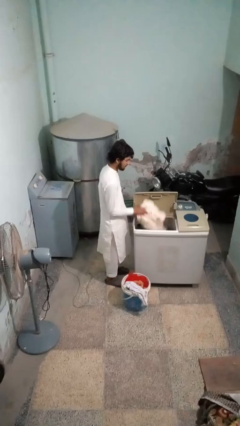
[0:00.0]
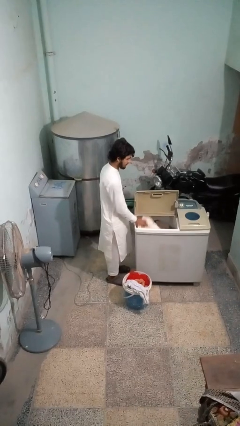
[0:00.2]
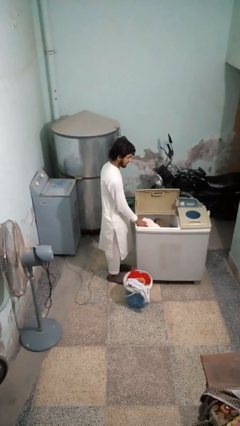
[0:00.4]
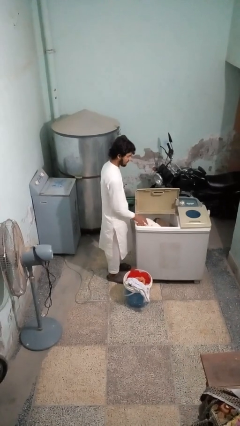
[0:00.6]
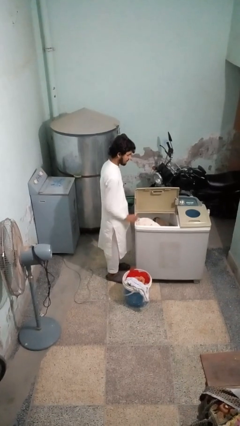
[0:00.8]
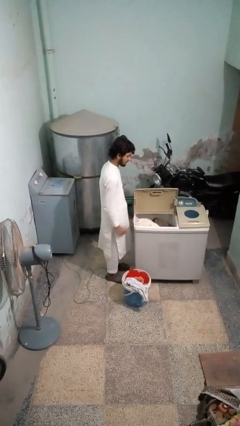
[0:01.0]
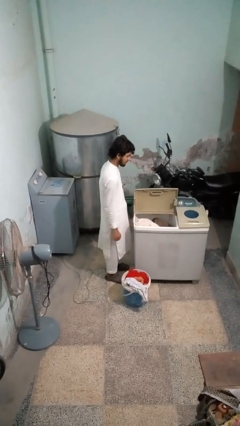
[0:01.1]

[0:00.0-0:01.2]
person loads clotheswasher

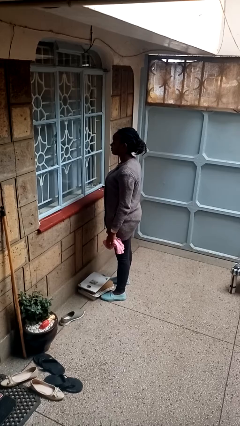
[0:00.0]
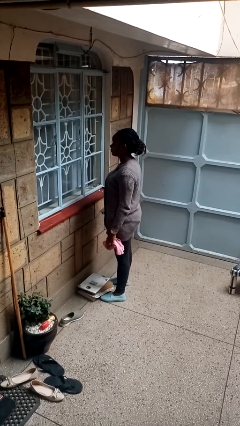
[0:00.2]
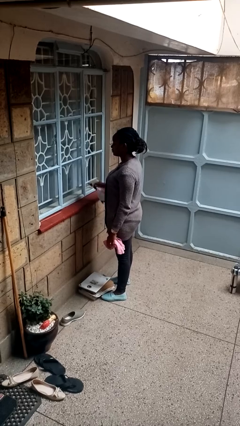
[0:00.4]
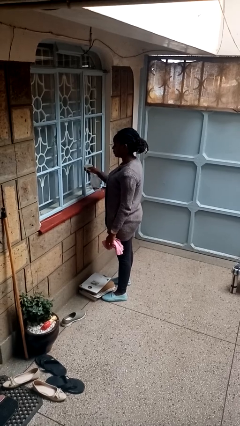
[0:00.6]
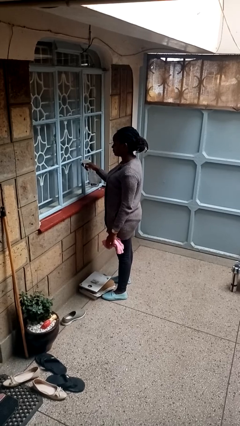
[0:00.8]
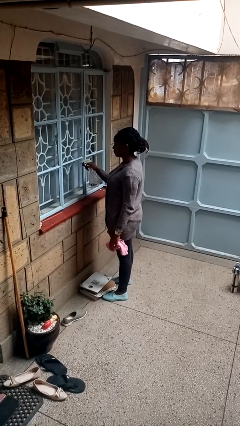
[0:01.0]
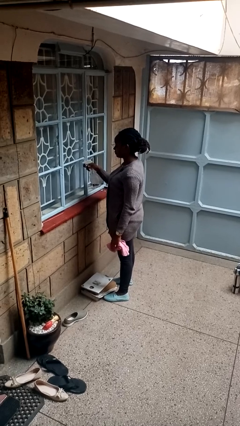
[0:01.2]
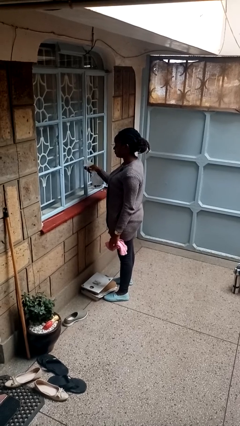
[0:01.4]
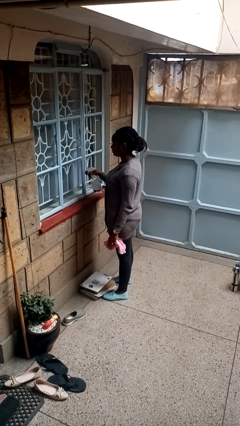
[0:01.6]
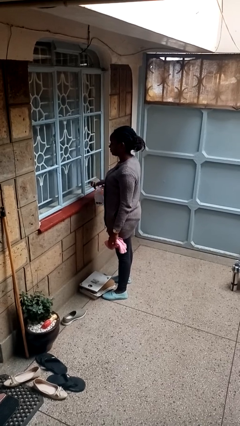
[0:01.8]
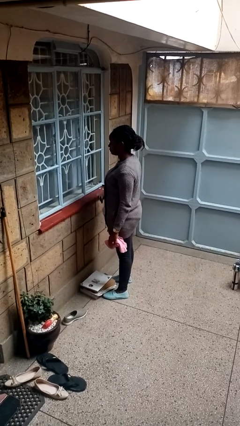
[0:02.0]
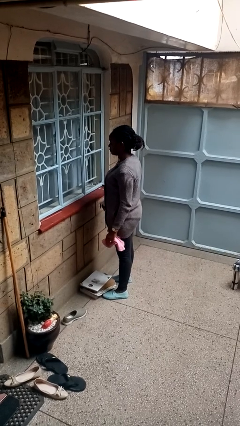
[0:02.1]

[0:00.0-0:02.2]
person sprays from bottle

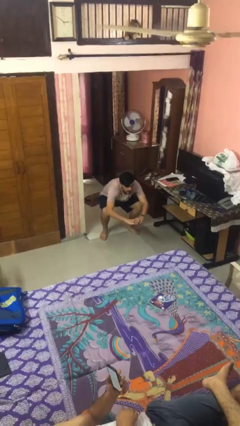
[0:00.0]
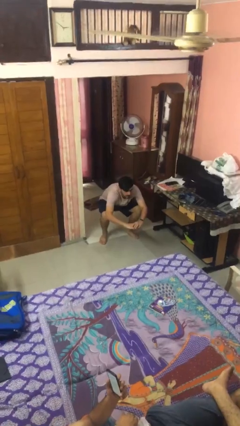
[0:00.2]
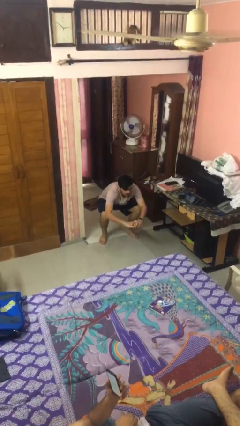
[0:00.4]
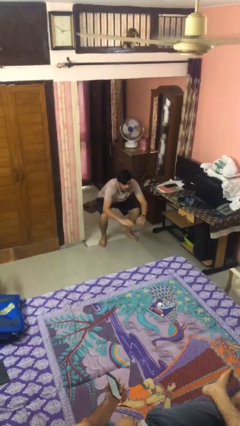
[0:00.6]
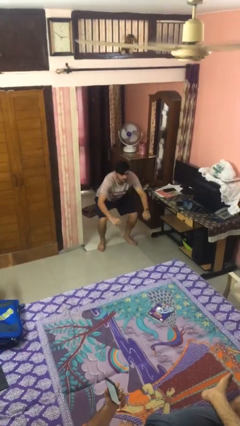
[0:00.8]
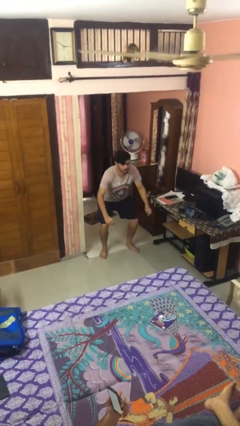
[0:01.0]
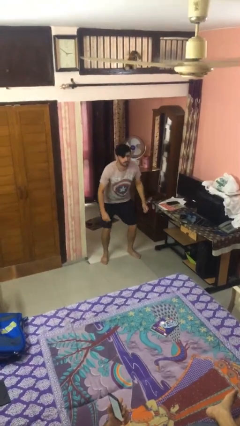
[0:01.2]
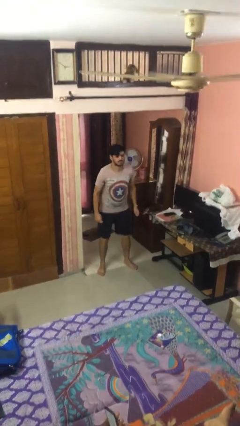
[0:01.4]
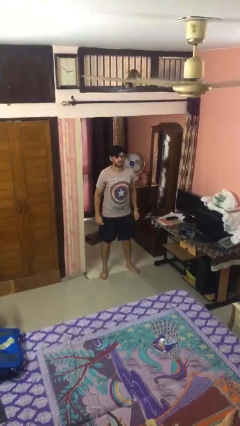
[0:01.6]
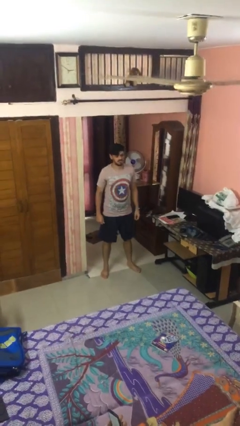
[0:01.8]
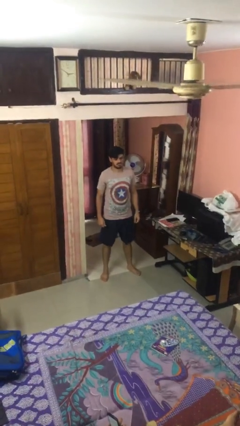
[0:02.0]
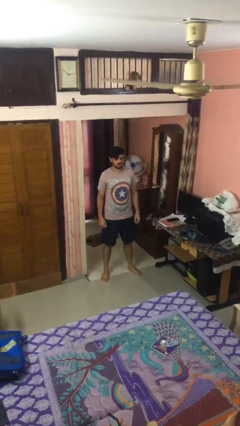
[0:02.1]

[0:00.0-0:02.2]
person stands up

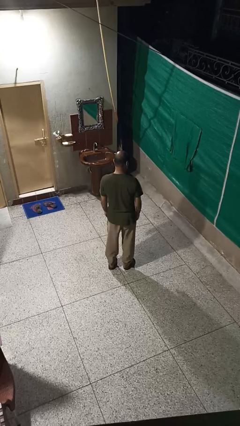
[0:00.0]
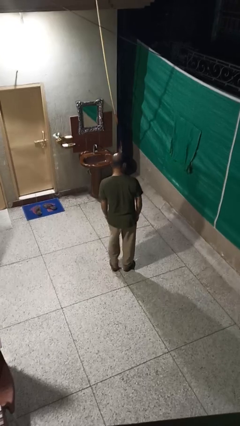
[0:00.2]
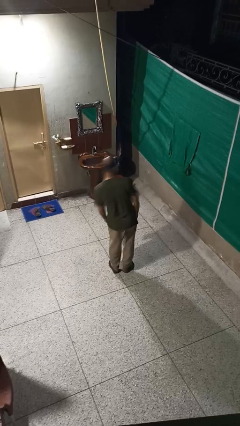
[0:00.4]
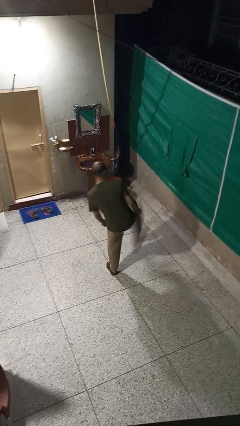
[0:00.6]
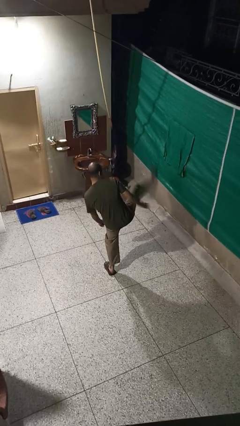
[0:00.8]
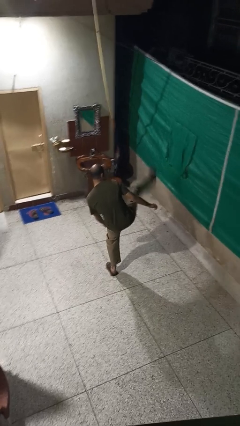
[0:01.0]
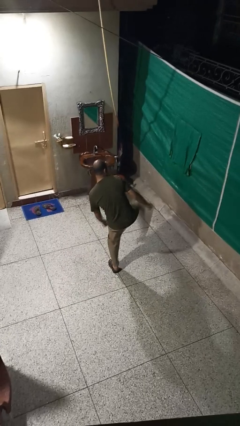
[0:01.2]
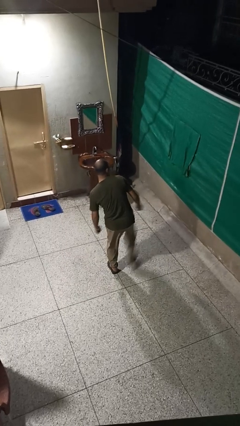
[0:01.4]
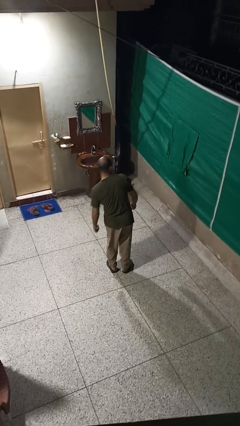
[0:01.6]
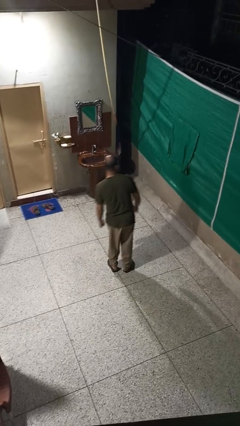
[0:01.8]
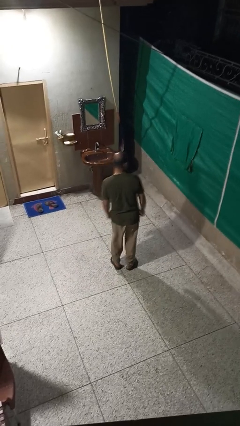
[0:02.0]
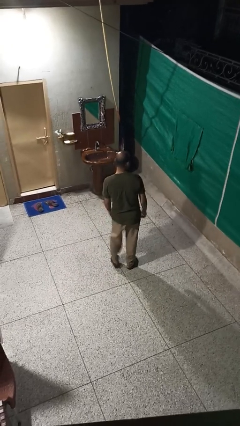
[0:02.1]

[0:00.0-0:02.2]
person karate kicks

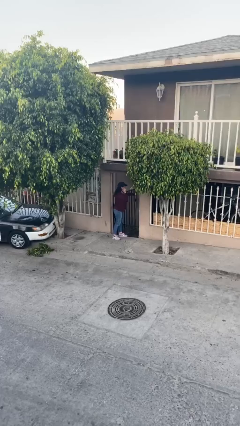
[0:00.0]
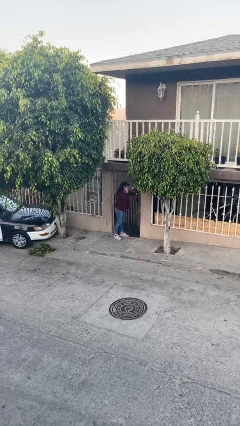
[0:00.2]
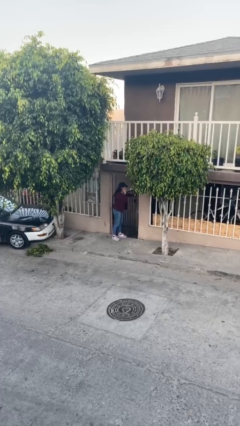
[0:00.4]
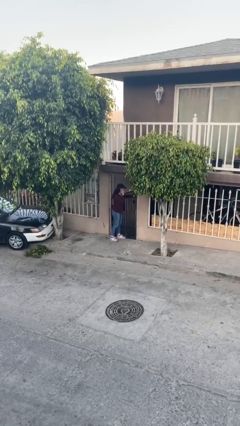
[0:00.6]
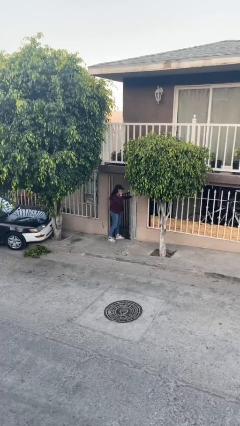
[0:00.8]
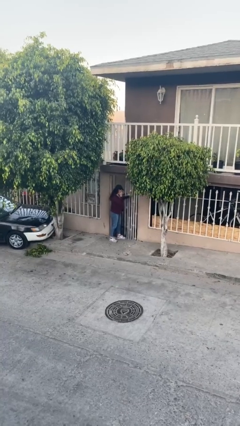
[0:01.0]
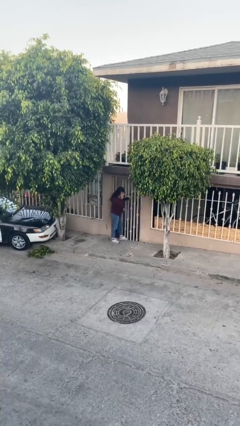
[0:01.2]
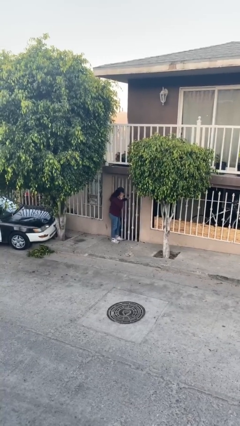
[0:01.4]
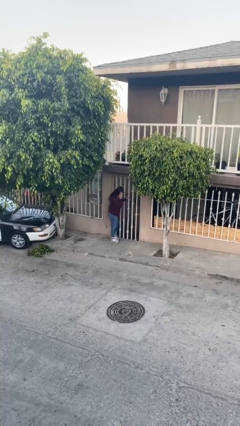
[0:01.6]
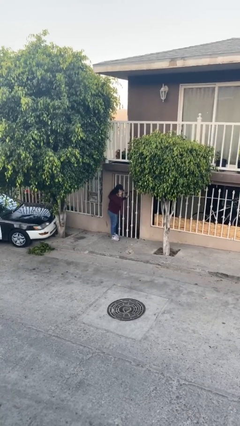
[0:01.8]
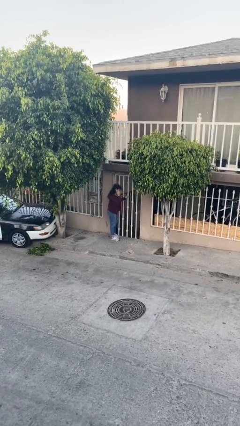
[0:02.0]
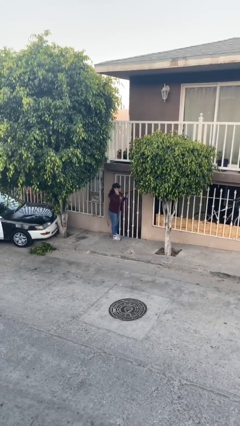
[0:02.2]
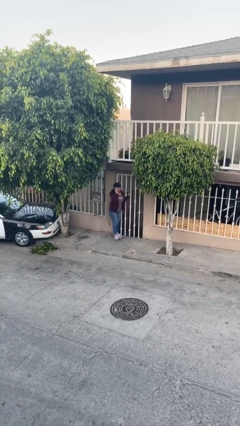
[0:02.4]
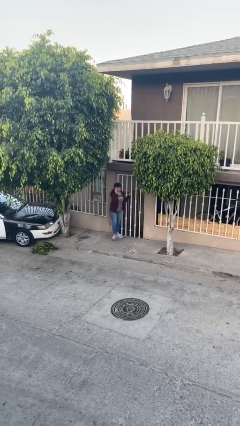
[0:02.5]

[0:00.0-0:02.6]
person closes facility door

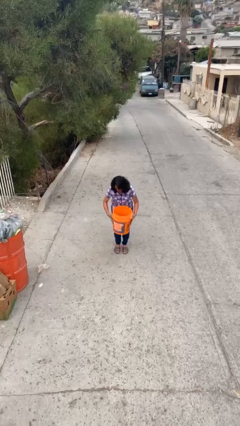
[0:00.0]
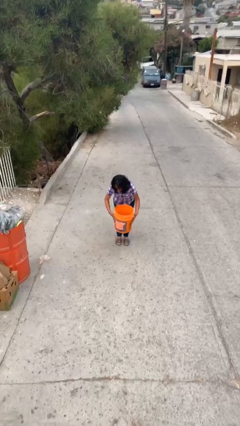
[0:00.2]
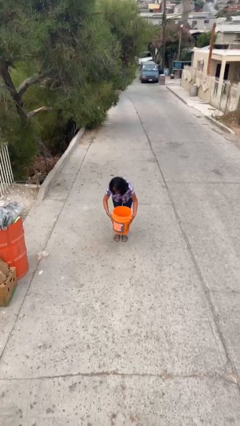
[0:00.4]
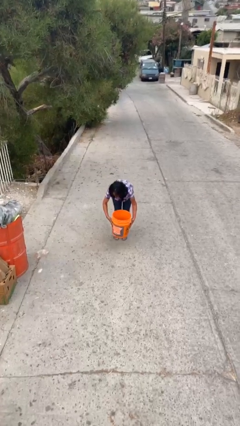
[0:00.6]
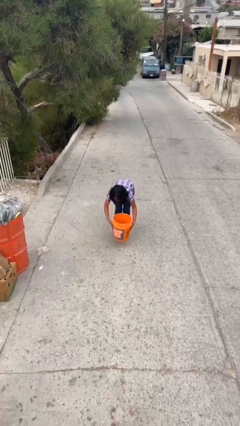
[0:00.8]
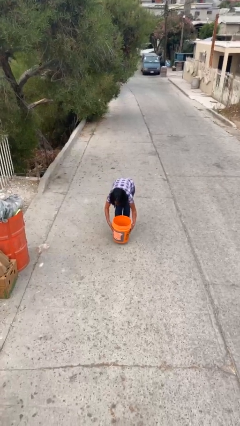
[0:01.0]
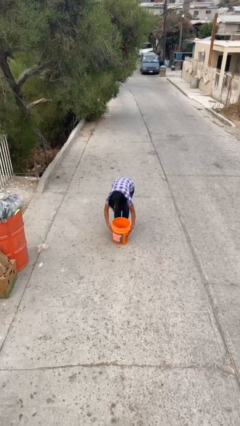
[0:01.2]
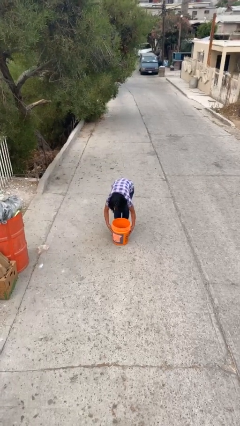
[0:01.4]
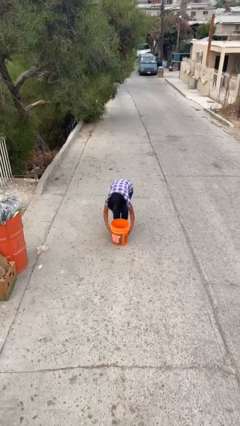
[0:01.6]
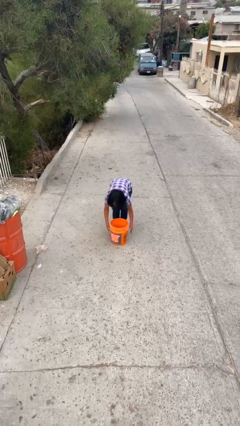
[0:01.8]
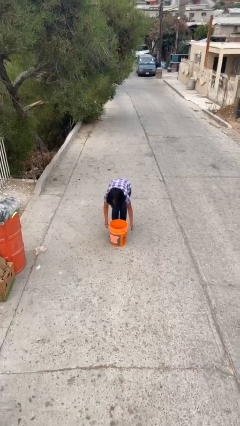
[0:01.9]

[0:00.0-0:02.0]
person puts down object on floor

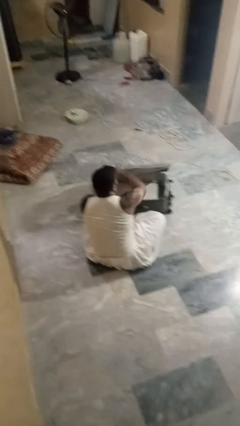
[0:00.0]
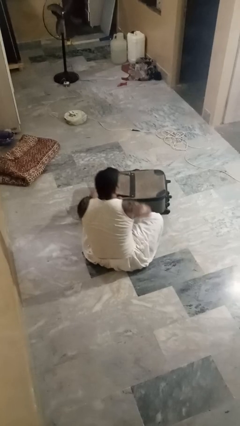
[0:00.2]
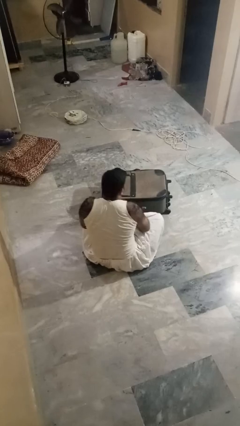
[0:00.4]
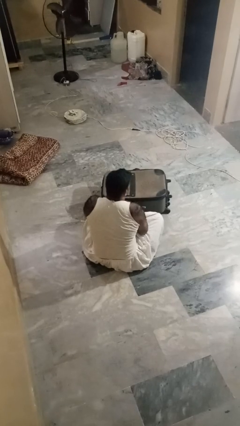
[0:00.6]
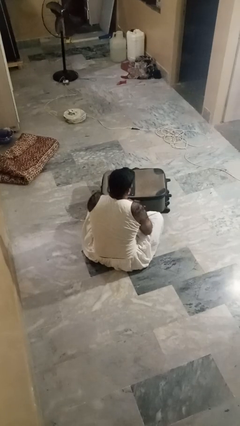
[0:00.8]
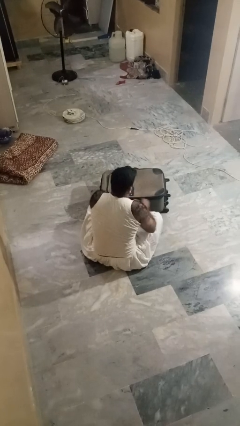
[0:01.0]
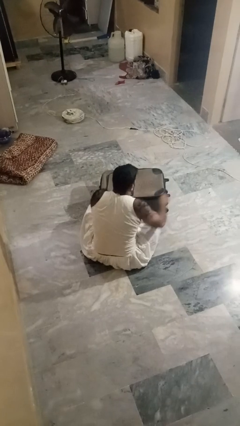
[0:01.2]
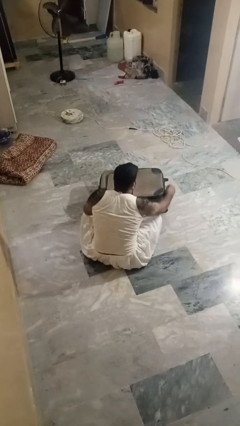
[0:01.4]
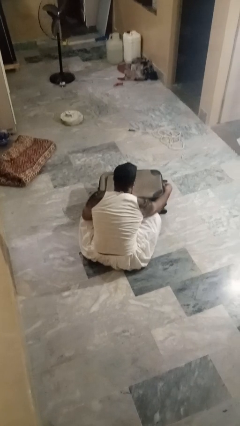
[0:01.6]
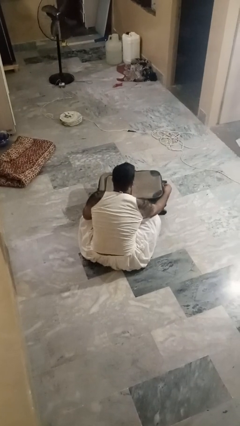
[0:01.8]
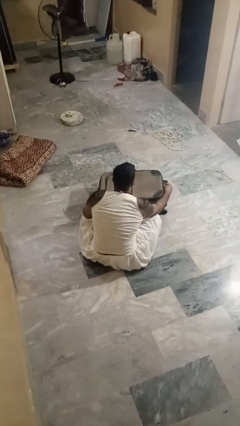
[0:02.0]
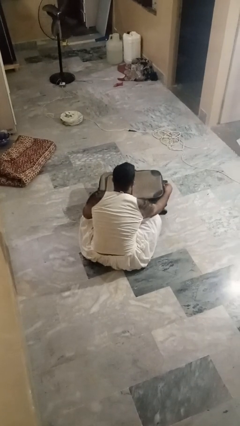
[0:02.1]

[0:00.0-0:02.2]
person closes suitcase

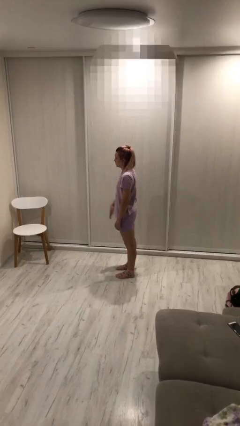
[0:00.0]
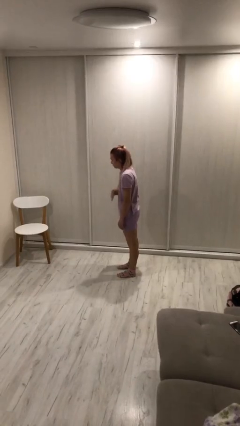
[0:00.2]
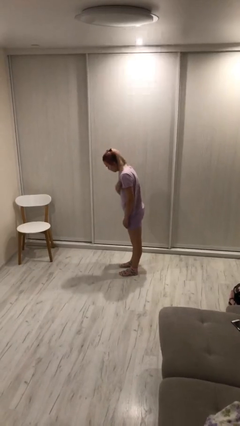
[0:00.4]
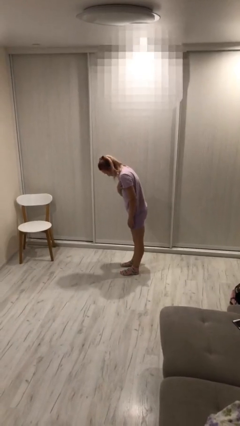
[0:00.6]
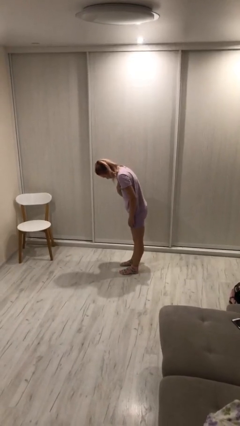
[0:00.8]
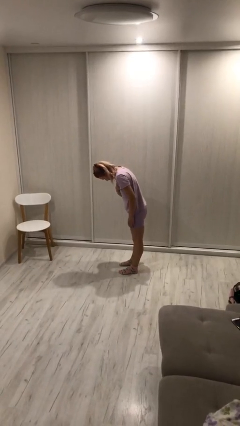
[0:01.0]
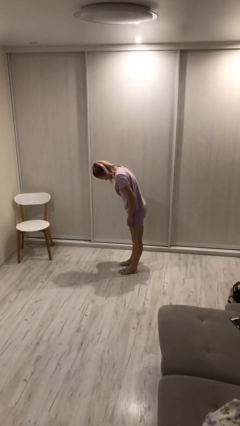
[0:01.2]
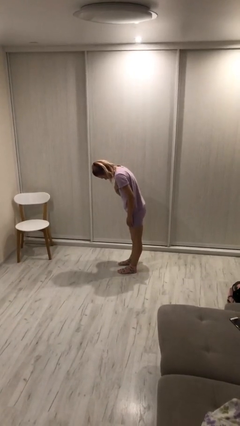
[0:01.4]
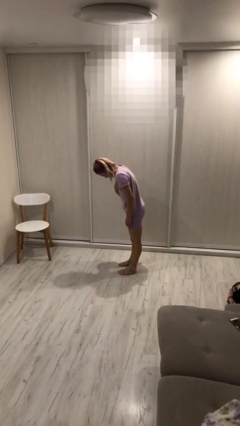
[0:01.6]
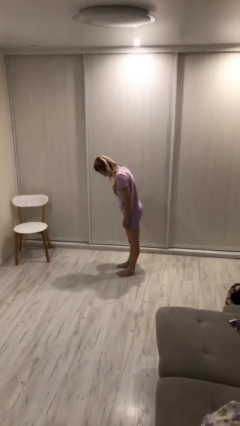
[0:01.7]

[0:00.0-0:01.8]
person bows
